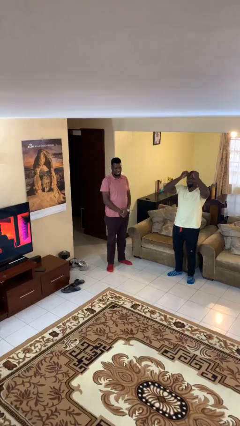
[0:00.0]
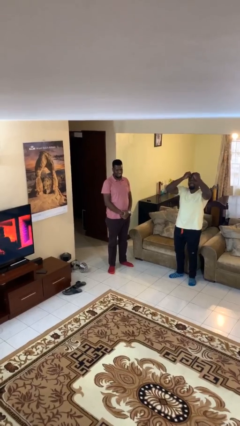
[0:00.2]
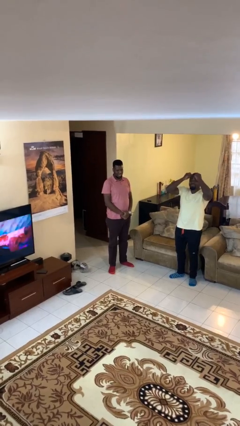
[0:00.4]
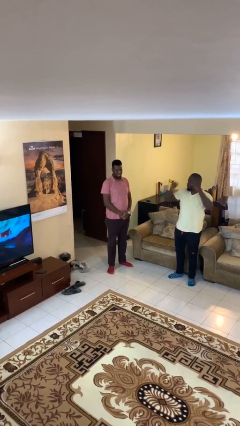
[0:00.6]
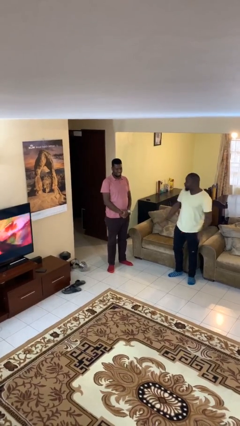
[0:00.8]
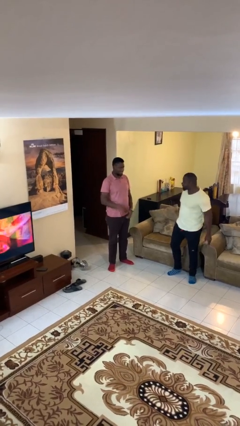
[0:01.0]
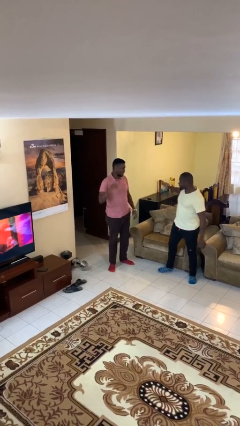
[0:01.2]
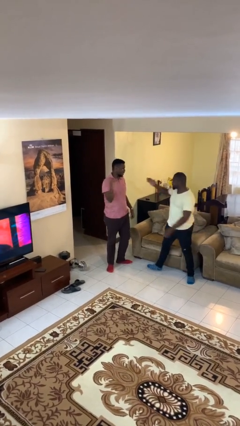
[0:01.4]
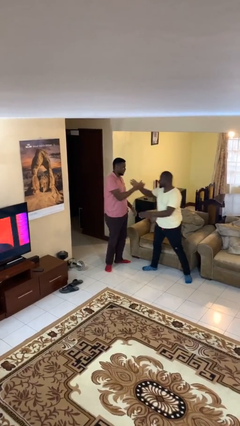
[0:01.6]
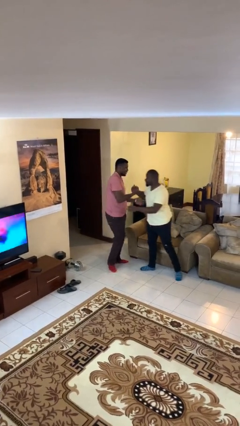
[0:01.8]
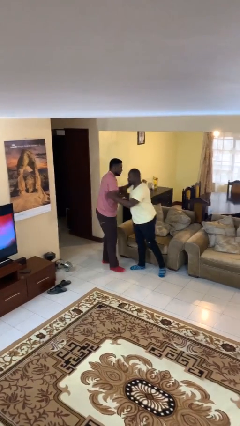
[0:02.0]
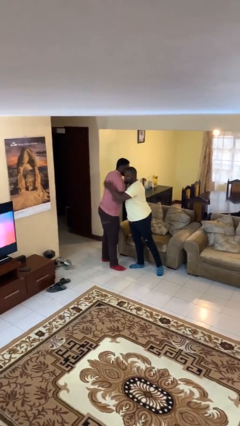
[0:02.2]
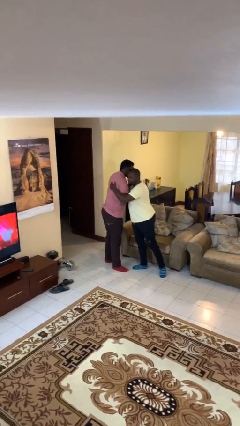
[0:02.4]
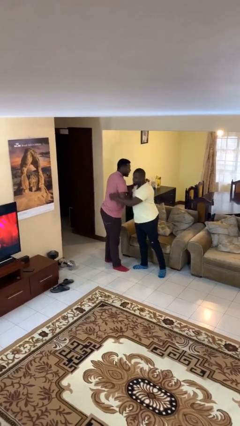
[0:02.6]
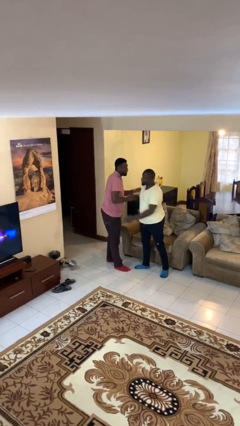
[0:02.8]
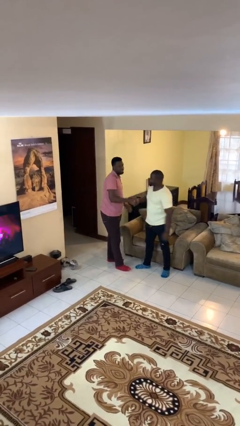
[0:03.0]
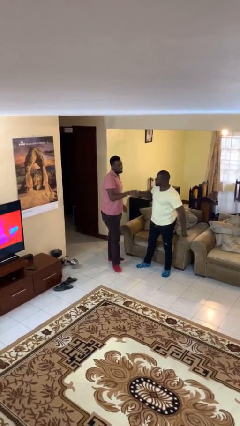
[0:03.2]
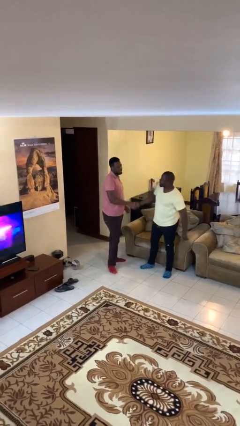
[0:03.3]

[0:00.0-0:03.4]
person embraces person

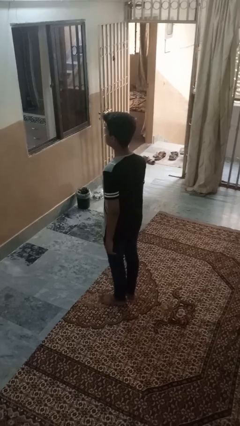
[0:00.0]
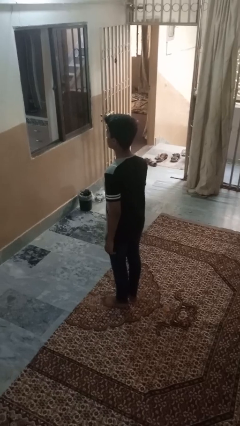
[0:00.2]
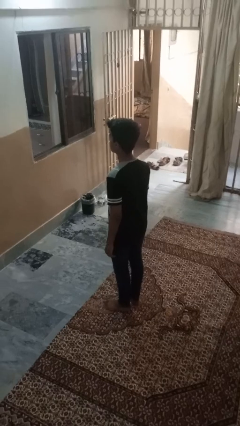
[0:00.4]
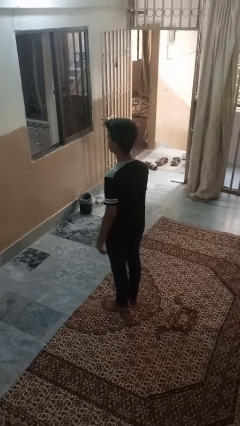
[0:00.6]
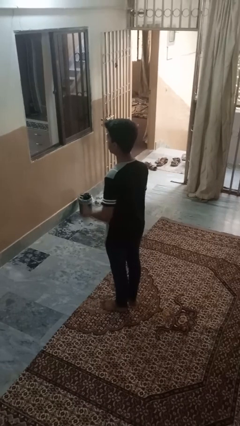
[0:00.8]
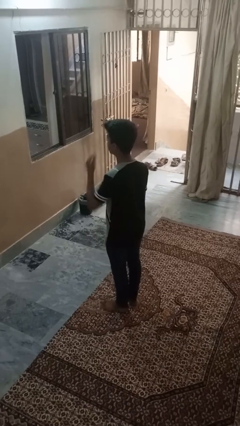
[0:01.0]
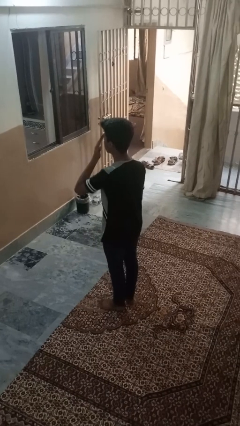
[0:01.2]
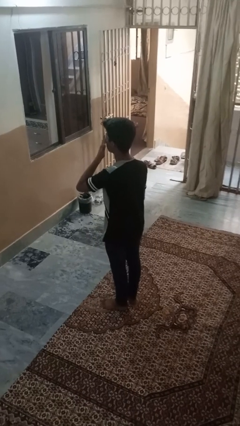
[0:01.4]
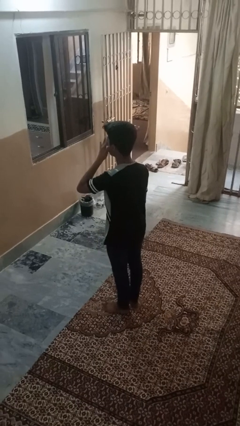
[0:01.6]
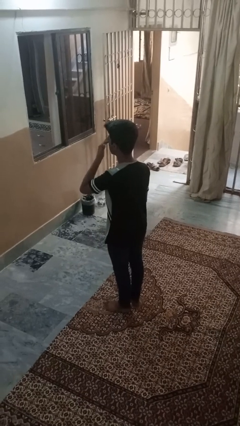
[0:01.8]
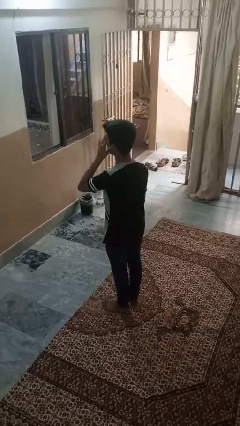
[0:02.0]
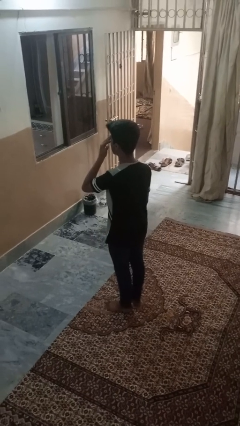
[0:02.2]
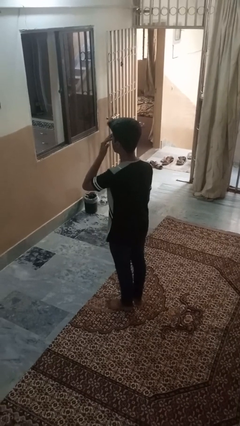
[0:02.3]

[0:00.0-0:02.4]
person rubs eyes

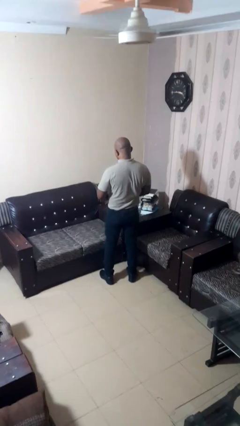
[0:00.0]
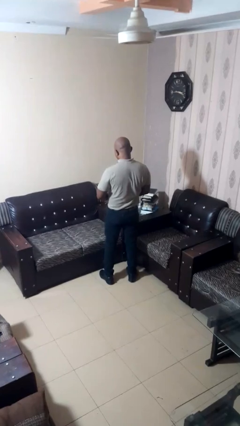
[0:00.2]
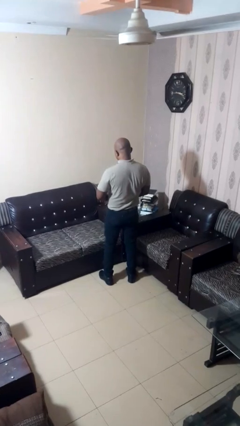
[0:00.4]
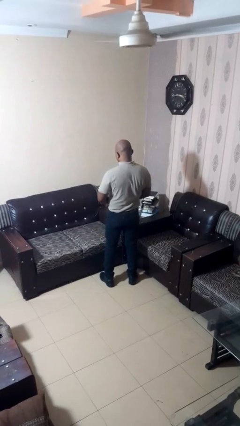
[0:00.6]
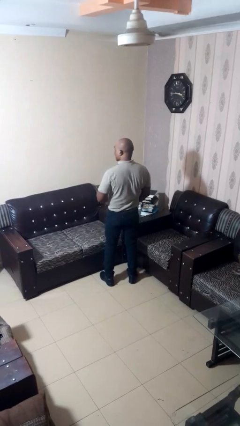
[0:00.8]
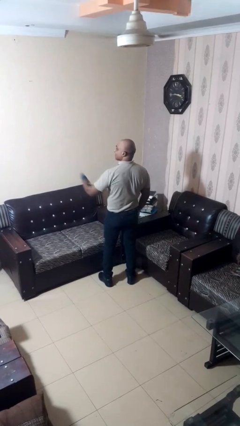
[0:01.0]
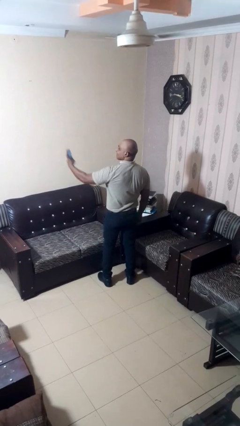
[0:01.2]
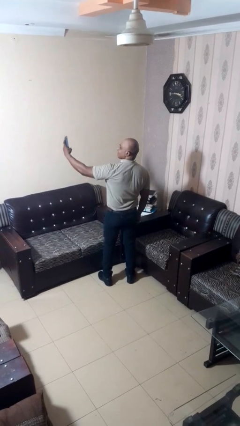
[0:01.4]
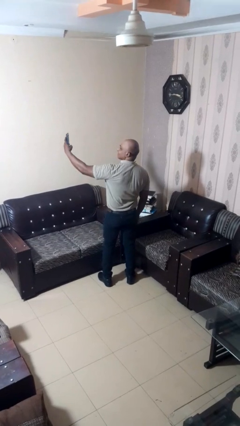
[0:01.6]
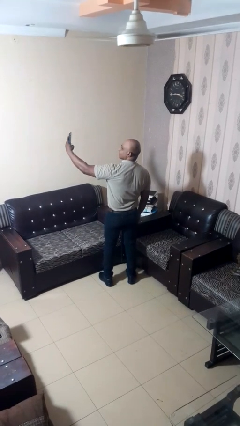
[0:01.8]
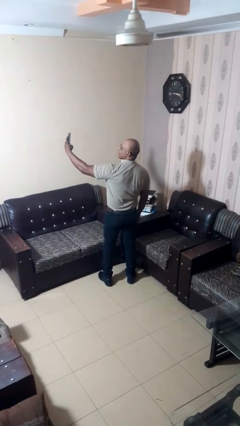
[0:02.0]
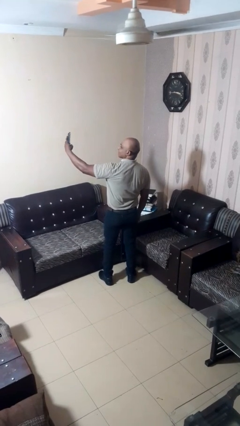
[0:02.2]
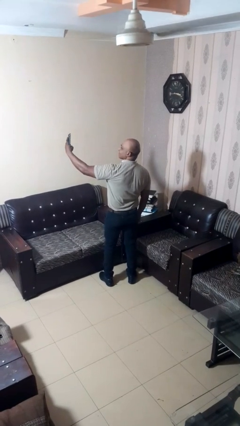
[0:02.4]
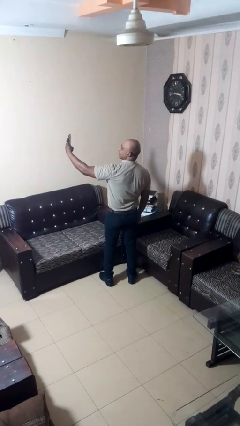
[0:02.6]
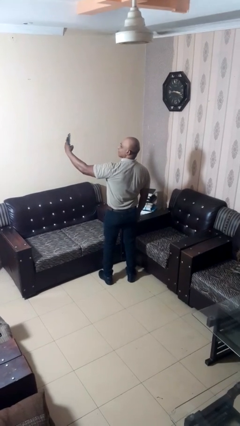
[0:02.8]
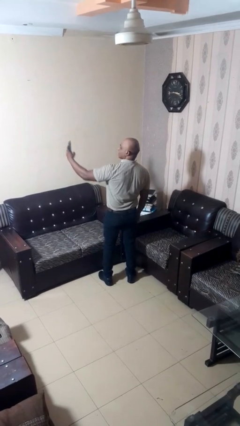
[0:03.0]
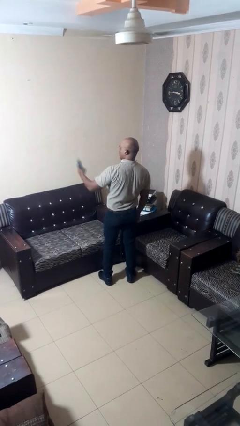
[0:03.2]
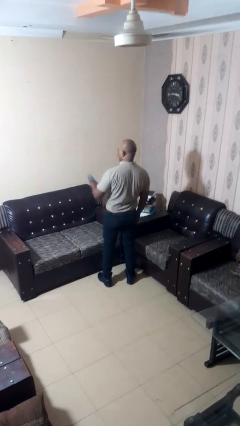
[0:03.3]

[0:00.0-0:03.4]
person takes selfie

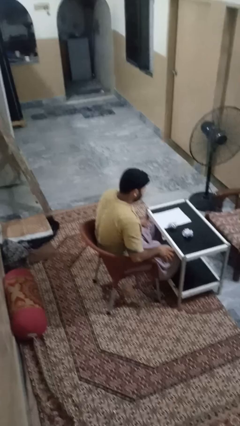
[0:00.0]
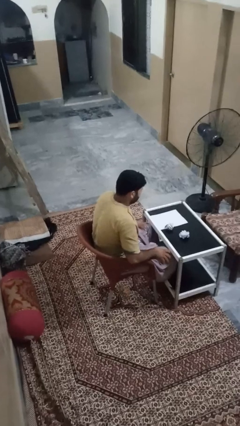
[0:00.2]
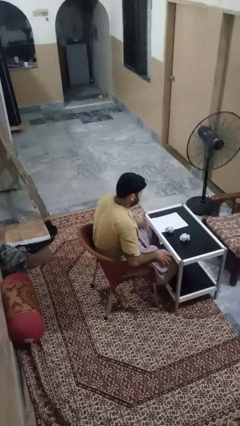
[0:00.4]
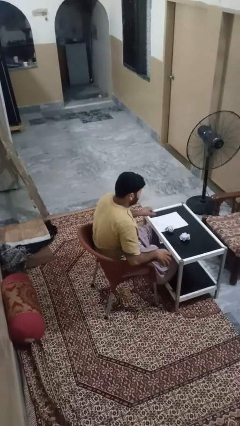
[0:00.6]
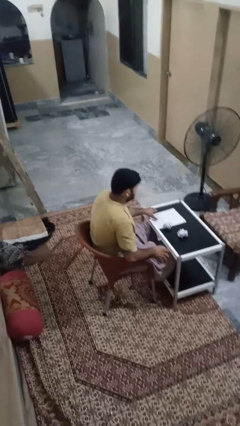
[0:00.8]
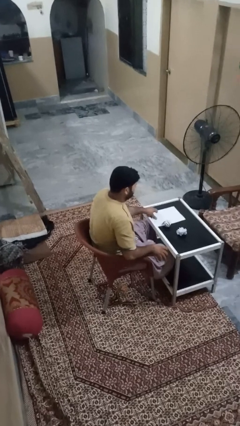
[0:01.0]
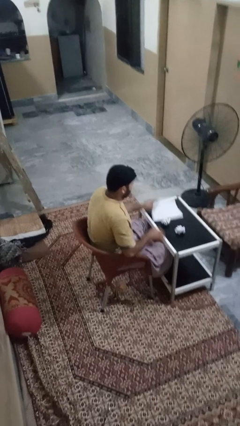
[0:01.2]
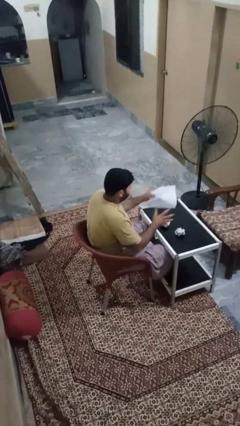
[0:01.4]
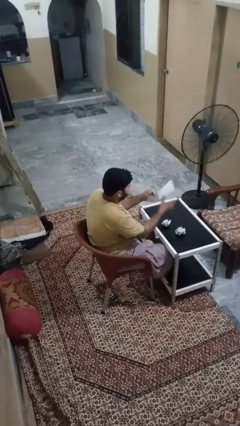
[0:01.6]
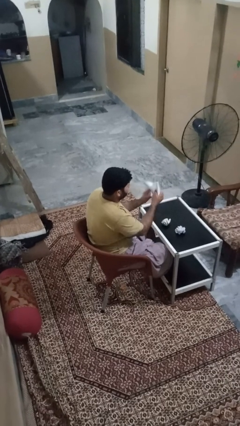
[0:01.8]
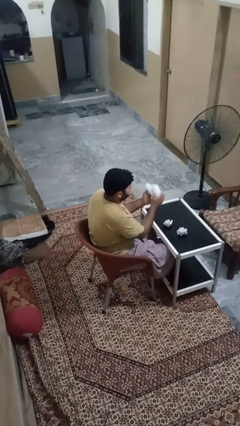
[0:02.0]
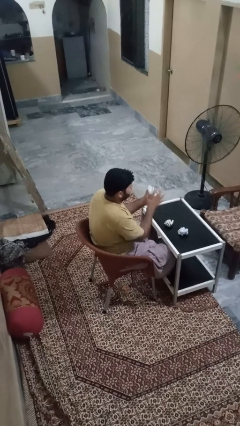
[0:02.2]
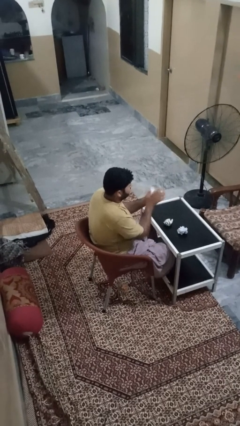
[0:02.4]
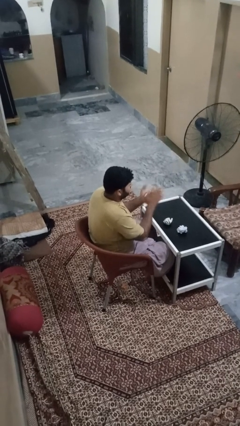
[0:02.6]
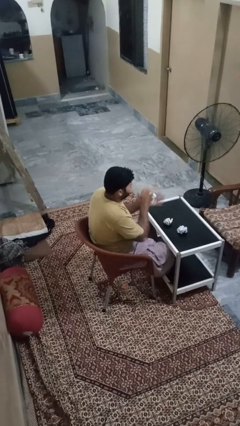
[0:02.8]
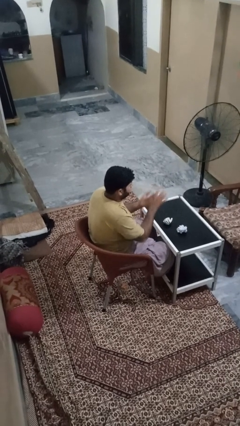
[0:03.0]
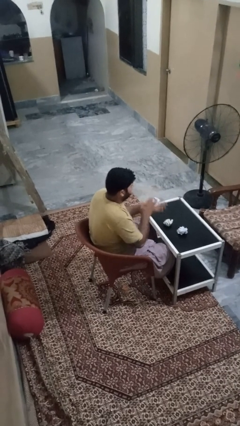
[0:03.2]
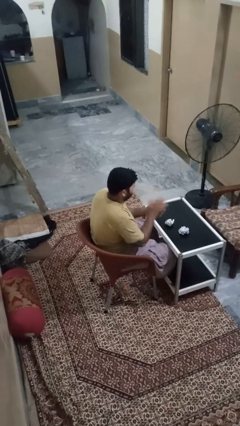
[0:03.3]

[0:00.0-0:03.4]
person crumples paper

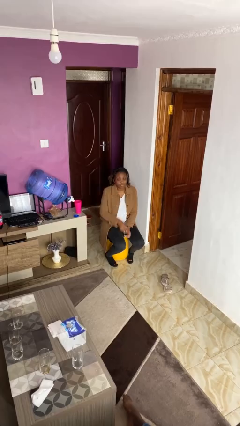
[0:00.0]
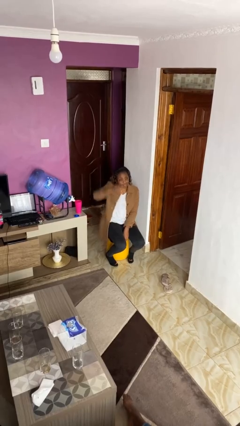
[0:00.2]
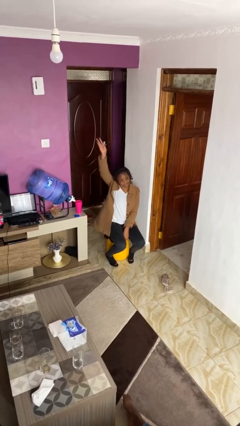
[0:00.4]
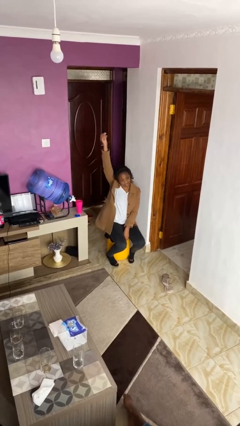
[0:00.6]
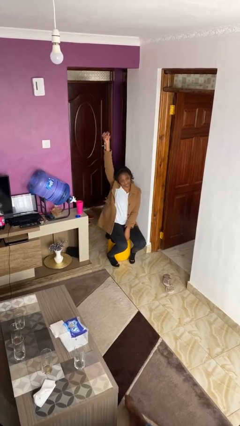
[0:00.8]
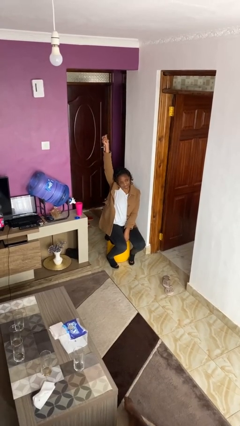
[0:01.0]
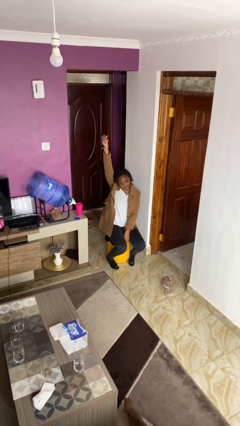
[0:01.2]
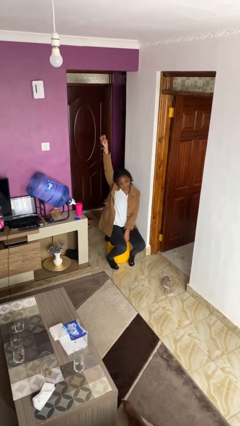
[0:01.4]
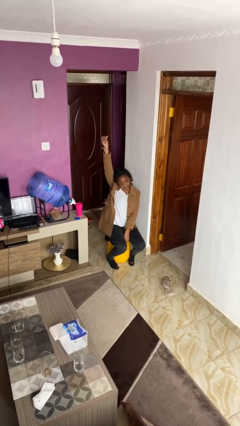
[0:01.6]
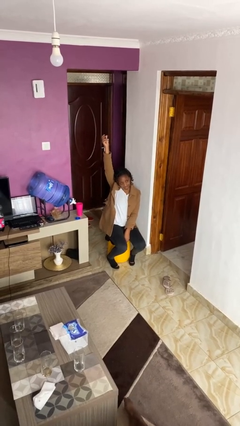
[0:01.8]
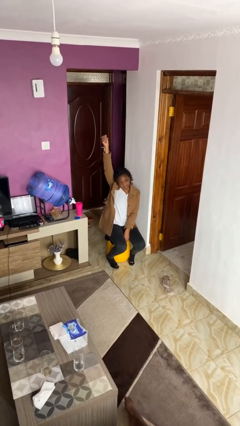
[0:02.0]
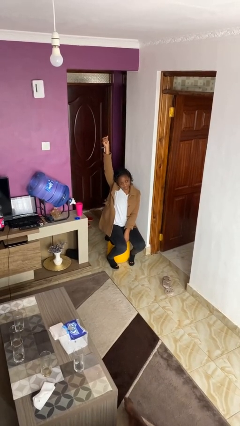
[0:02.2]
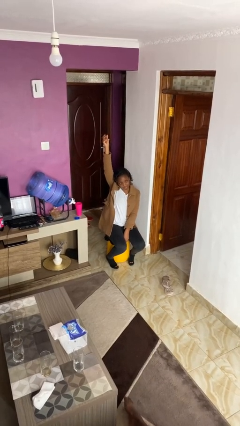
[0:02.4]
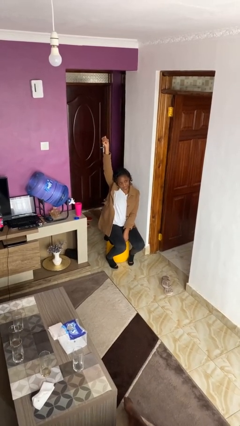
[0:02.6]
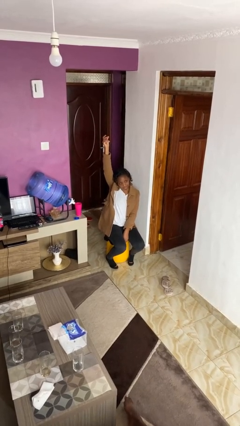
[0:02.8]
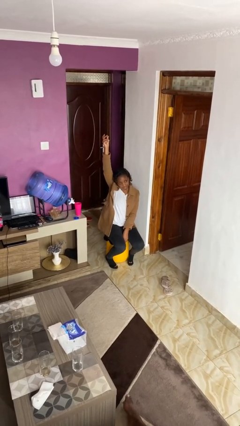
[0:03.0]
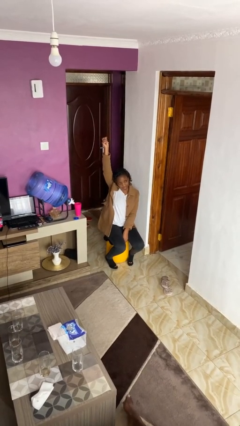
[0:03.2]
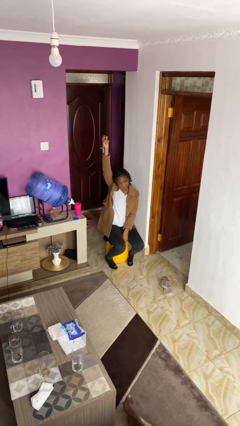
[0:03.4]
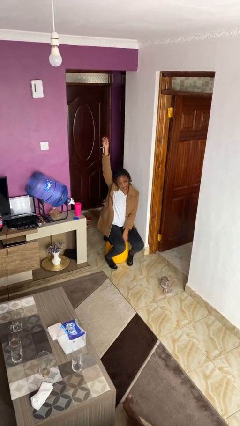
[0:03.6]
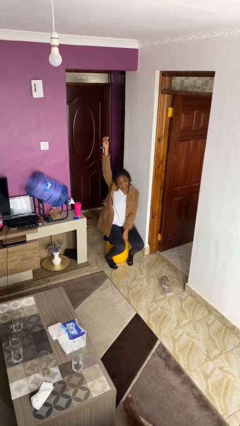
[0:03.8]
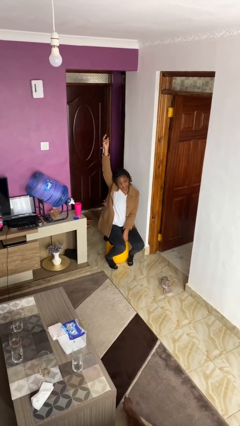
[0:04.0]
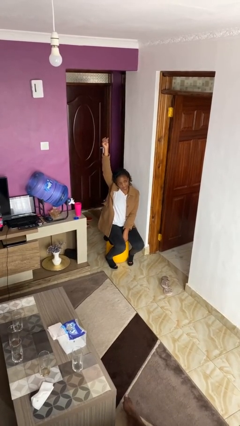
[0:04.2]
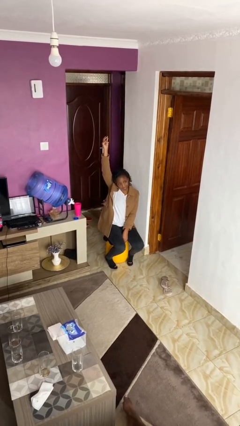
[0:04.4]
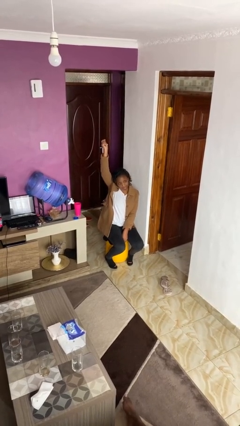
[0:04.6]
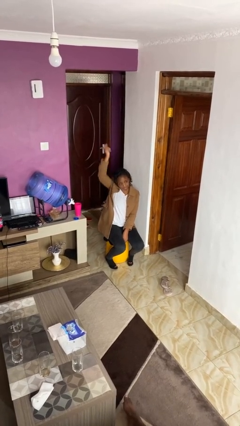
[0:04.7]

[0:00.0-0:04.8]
person gestures raise hand
